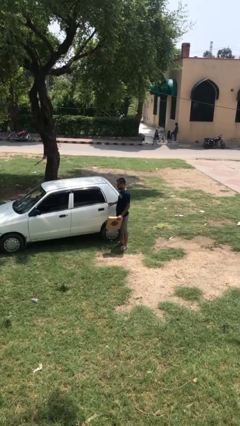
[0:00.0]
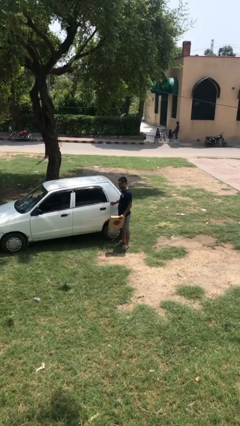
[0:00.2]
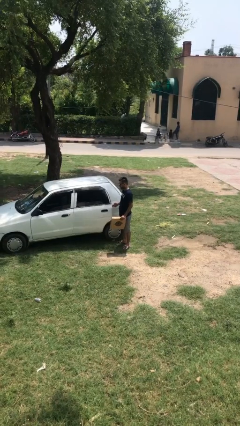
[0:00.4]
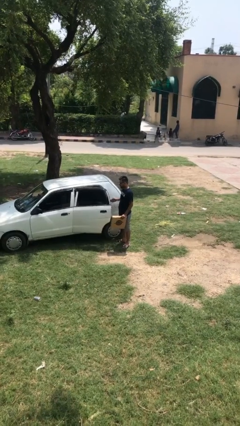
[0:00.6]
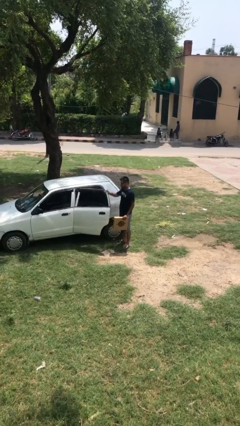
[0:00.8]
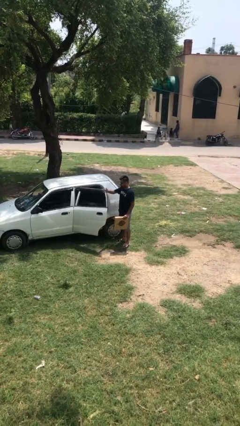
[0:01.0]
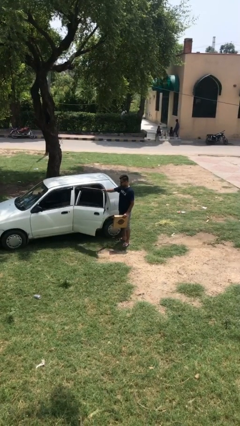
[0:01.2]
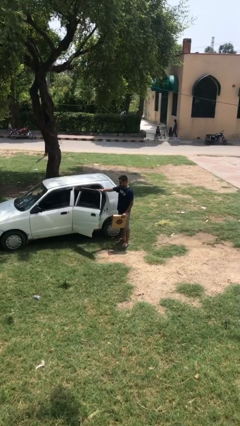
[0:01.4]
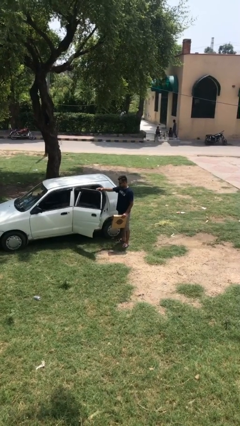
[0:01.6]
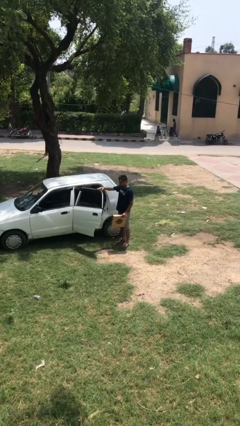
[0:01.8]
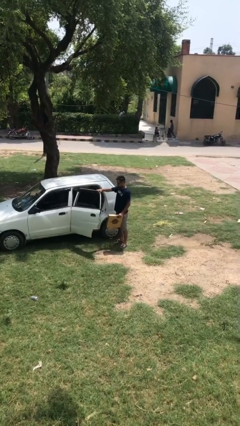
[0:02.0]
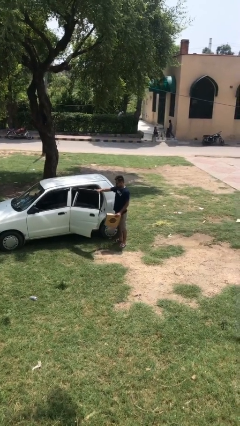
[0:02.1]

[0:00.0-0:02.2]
person opens car door

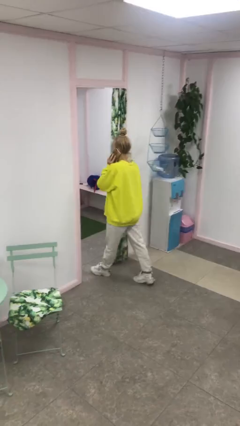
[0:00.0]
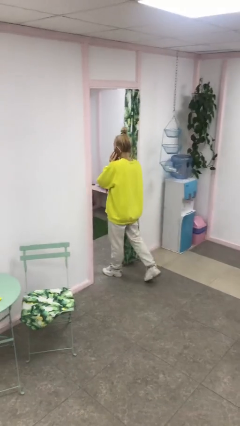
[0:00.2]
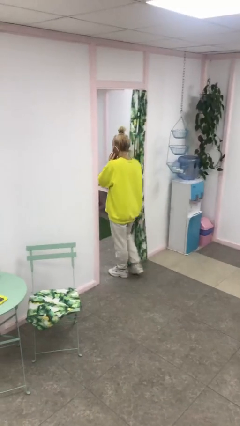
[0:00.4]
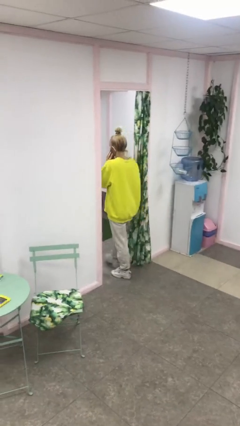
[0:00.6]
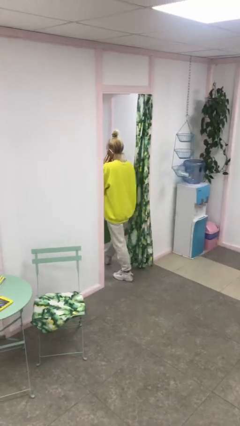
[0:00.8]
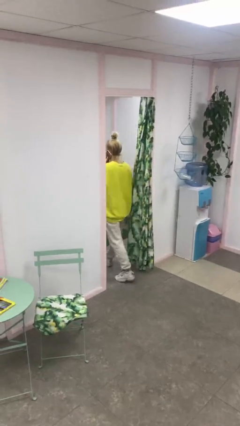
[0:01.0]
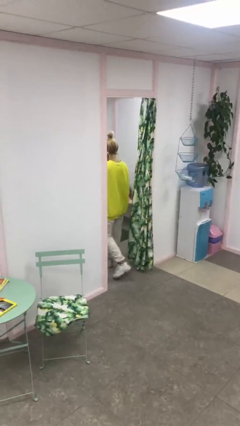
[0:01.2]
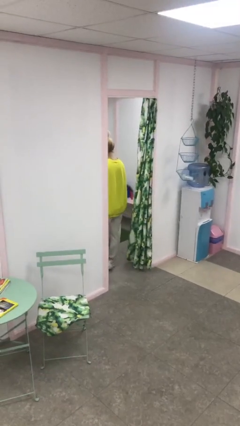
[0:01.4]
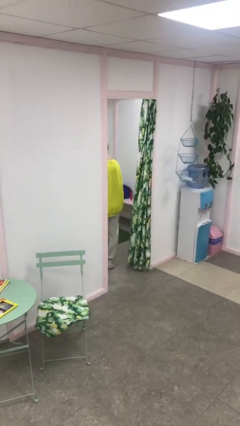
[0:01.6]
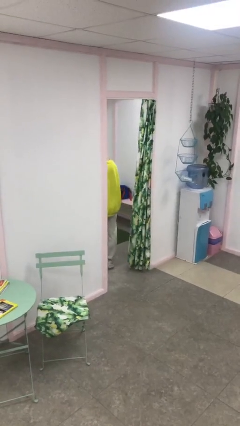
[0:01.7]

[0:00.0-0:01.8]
person exits scene through structure

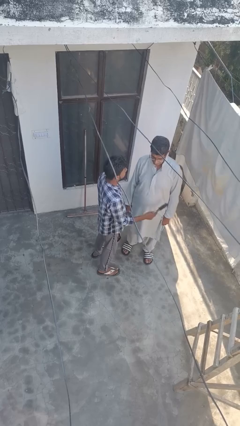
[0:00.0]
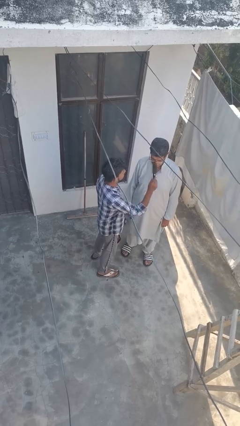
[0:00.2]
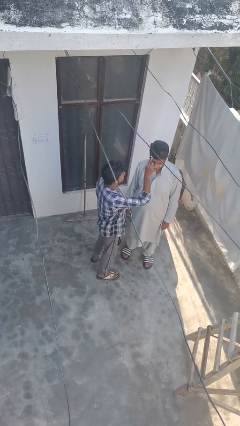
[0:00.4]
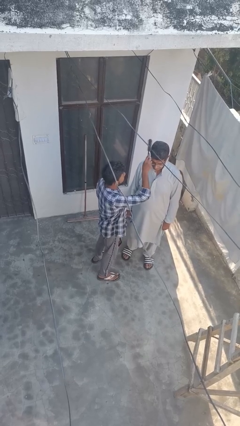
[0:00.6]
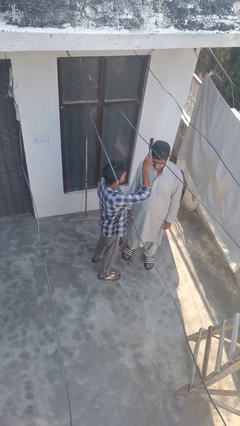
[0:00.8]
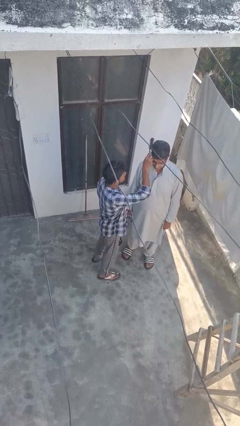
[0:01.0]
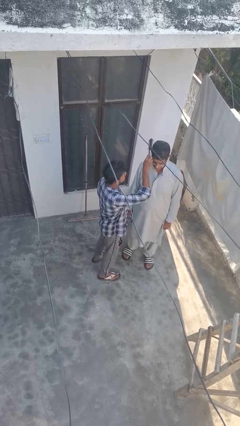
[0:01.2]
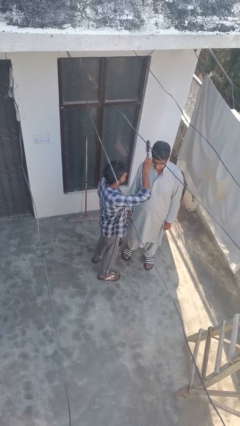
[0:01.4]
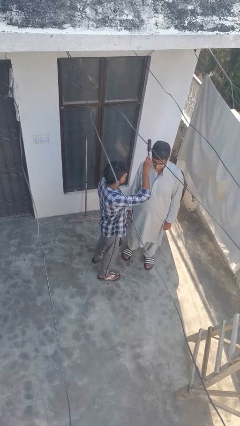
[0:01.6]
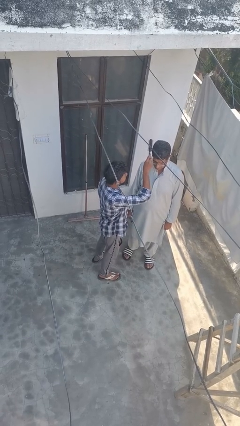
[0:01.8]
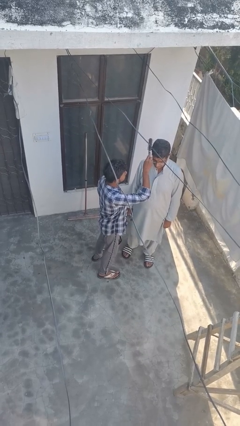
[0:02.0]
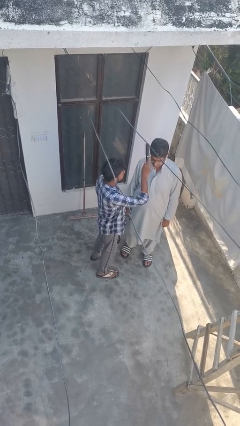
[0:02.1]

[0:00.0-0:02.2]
person brushes hair of person

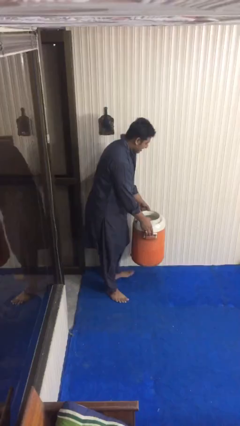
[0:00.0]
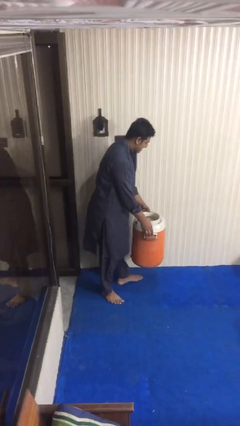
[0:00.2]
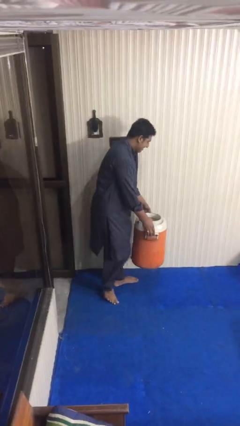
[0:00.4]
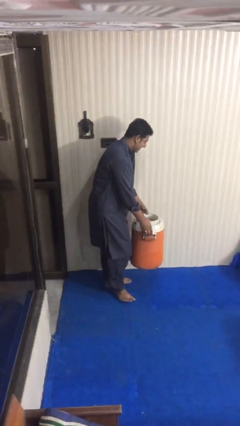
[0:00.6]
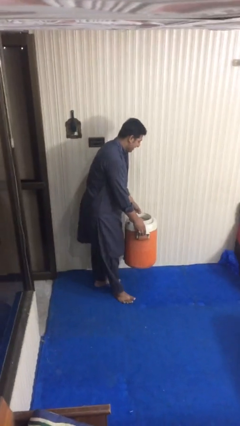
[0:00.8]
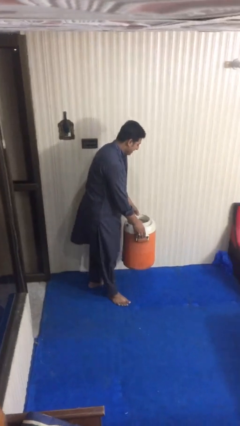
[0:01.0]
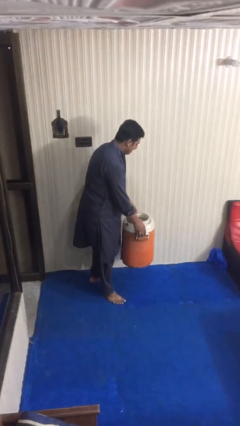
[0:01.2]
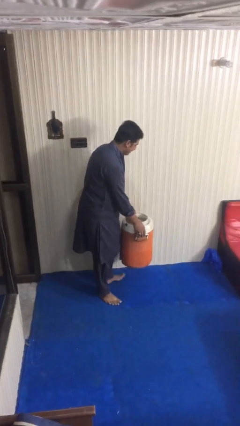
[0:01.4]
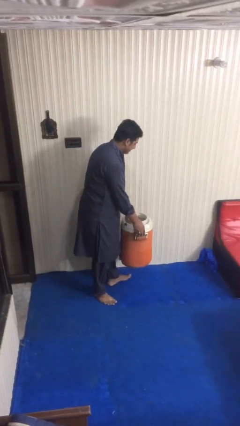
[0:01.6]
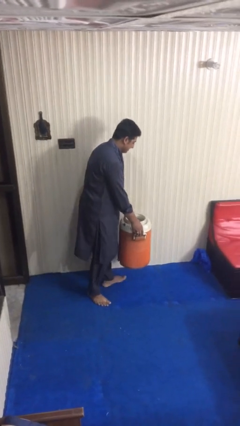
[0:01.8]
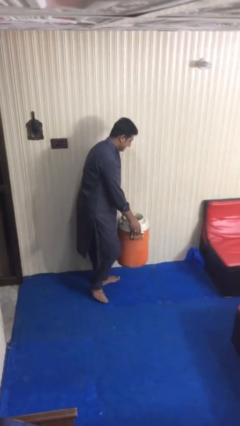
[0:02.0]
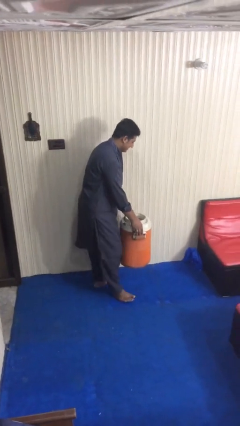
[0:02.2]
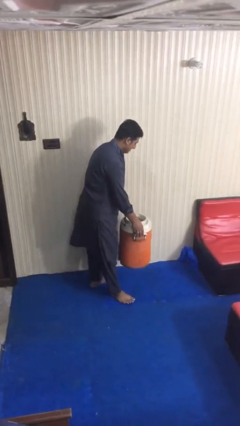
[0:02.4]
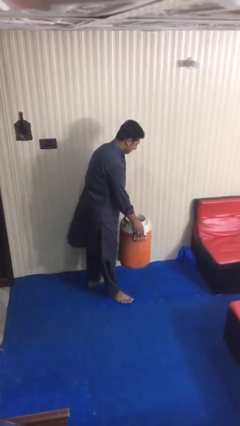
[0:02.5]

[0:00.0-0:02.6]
person carries heavy object

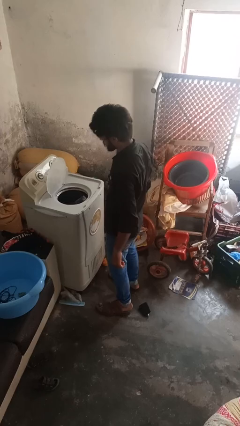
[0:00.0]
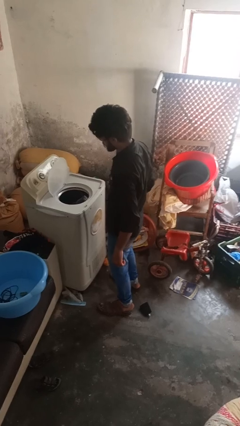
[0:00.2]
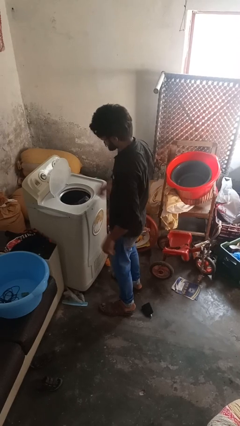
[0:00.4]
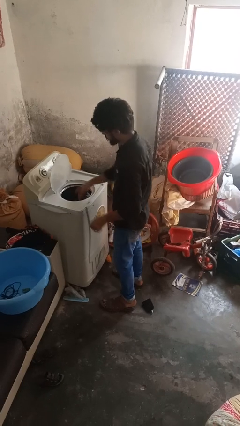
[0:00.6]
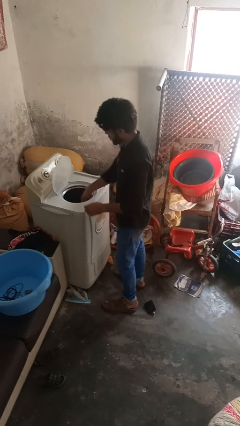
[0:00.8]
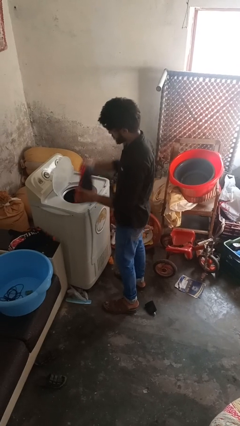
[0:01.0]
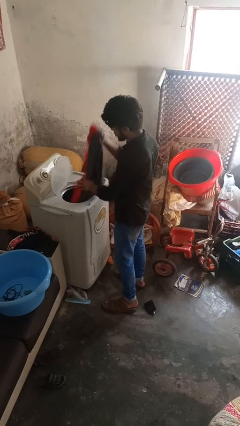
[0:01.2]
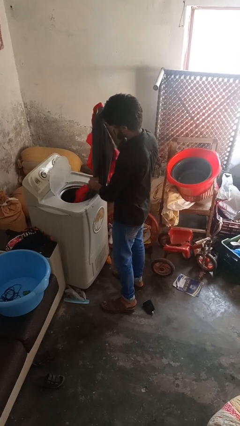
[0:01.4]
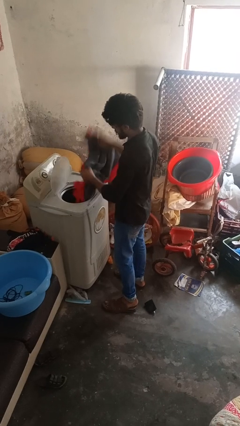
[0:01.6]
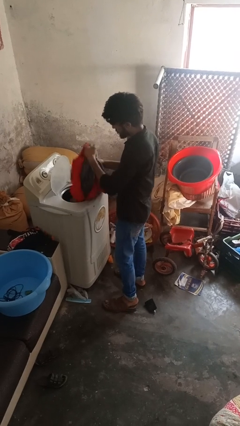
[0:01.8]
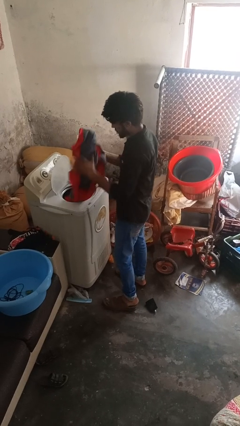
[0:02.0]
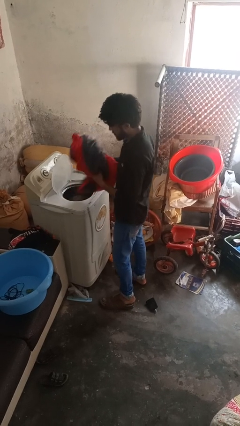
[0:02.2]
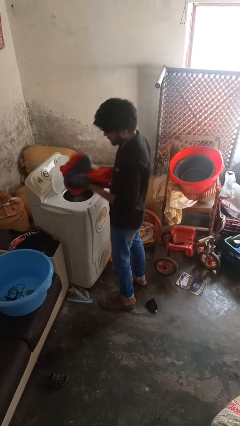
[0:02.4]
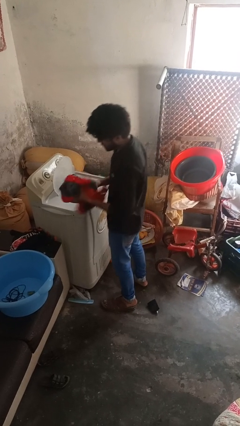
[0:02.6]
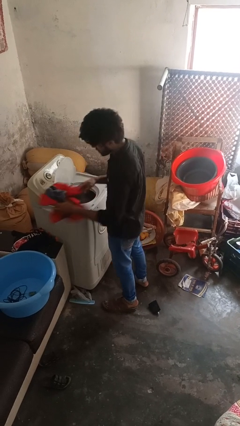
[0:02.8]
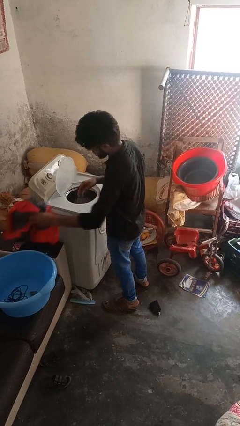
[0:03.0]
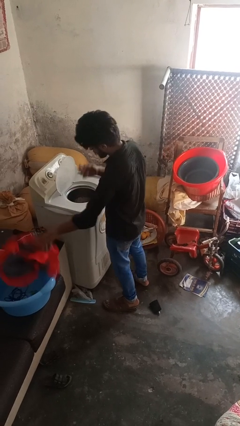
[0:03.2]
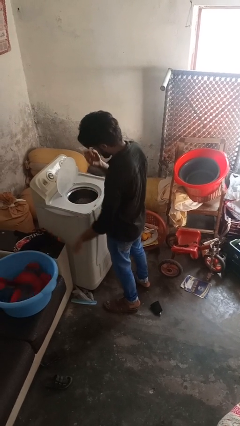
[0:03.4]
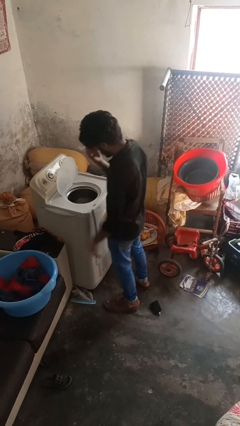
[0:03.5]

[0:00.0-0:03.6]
person loads clotheswasher

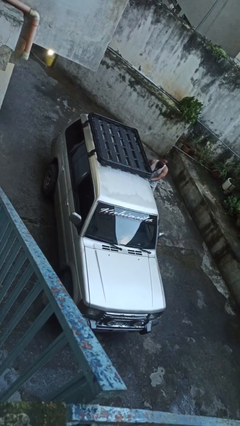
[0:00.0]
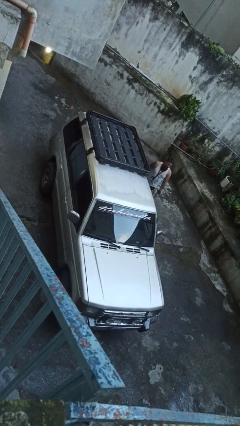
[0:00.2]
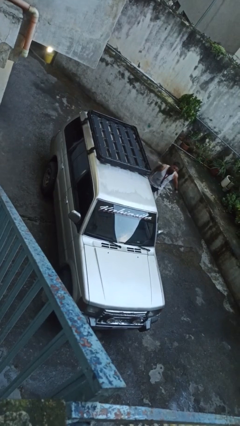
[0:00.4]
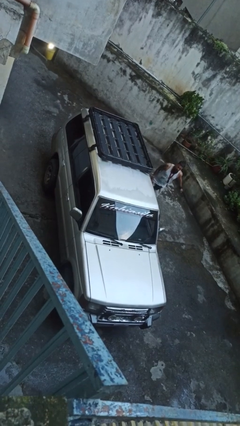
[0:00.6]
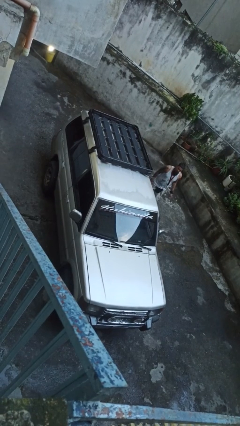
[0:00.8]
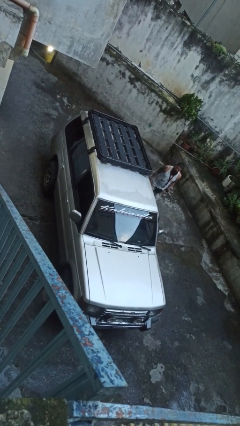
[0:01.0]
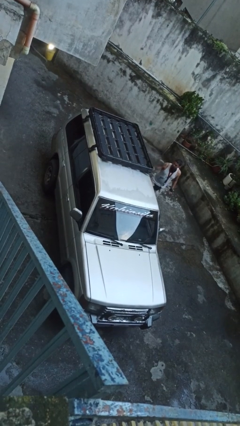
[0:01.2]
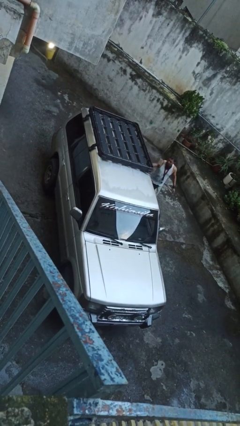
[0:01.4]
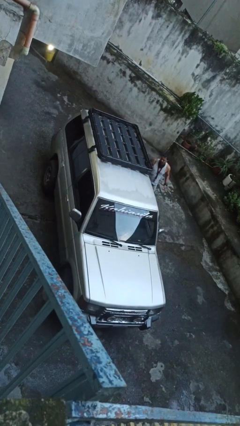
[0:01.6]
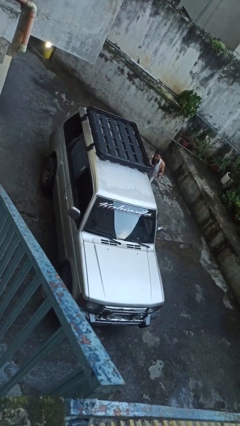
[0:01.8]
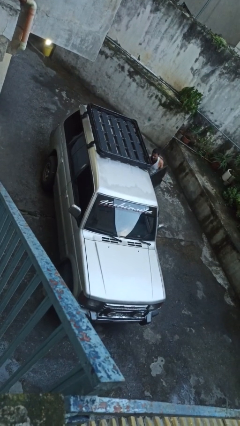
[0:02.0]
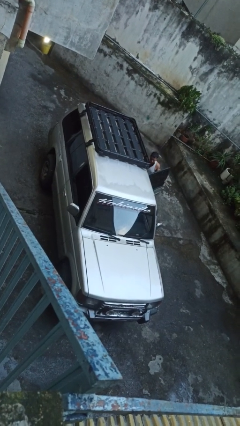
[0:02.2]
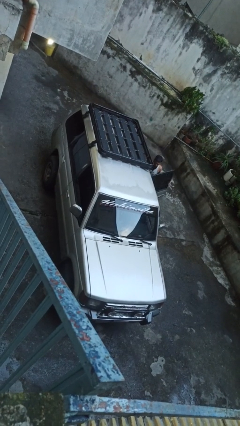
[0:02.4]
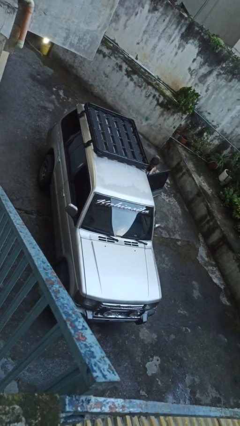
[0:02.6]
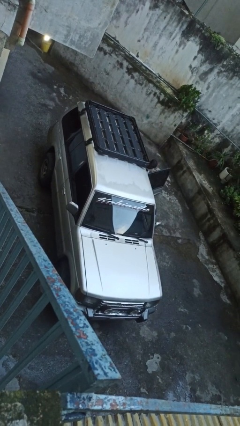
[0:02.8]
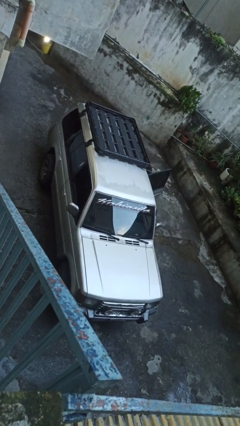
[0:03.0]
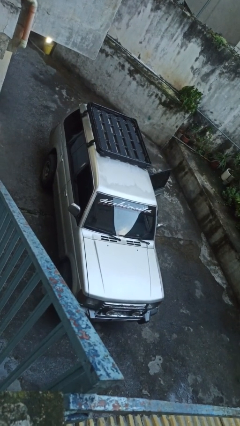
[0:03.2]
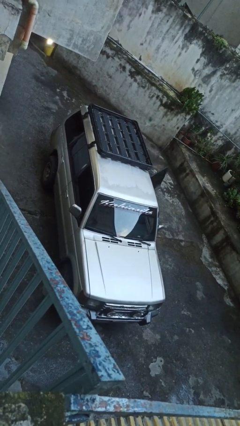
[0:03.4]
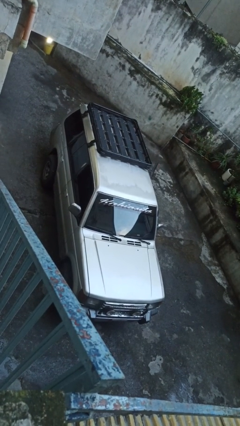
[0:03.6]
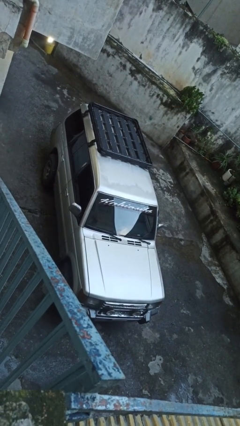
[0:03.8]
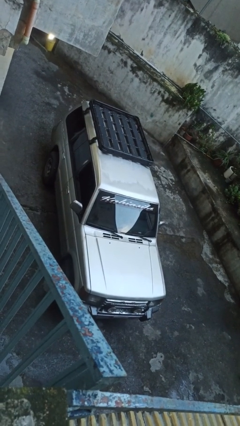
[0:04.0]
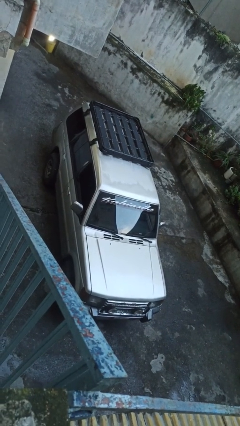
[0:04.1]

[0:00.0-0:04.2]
car picks up person

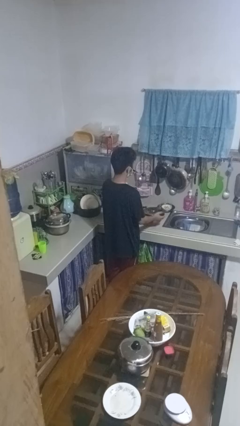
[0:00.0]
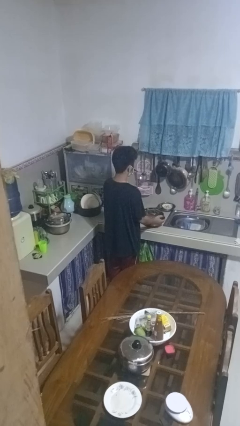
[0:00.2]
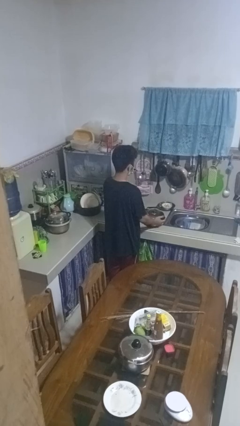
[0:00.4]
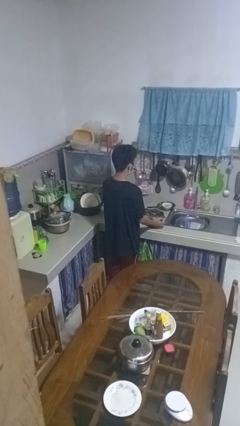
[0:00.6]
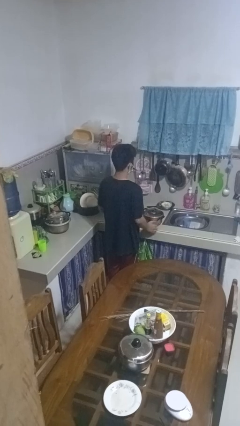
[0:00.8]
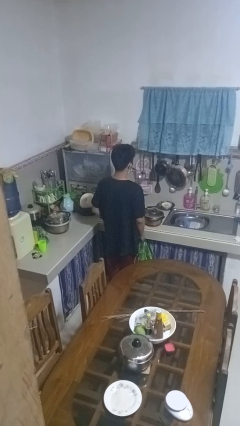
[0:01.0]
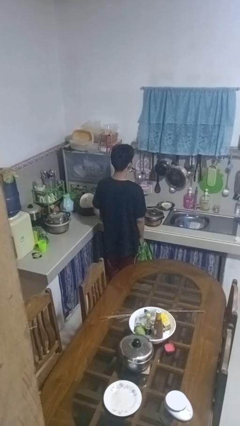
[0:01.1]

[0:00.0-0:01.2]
person puts down object on countertop
